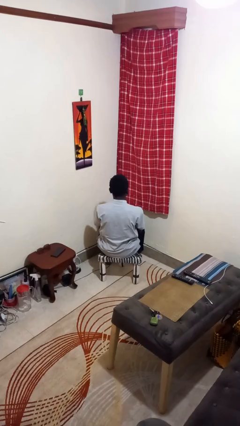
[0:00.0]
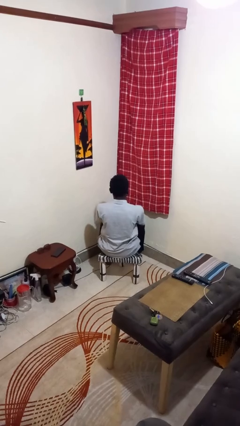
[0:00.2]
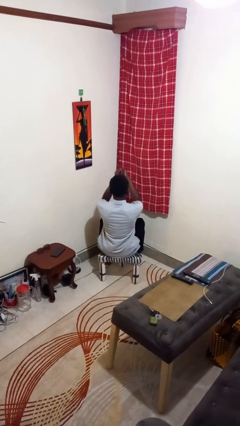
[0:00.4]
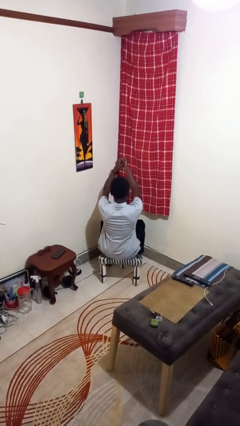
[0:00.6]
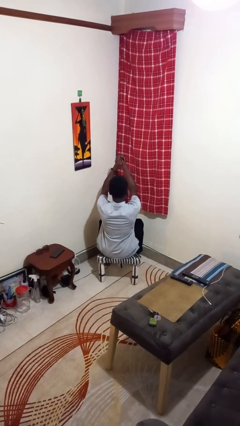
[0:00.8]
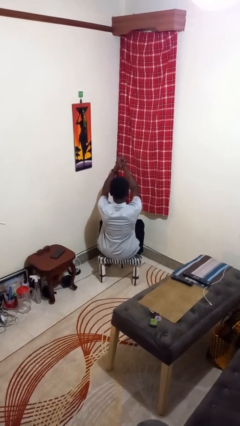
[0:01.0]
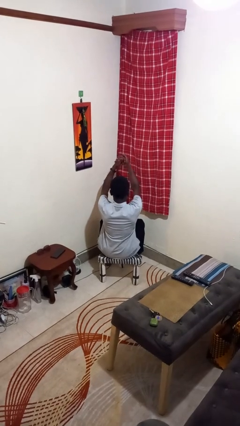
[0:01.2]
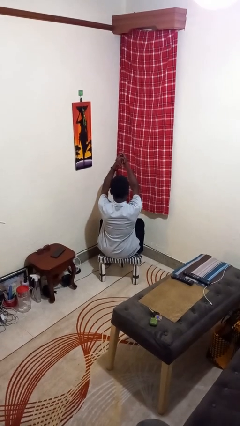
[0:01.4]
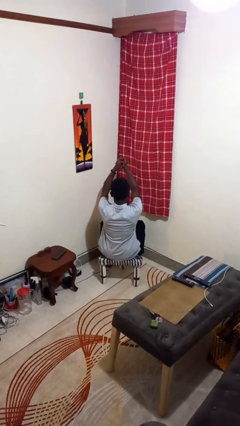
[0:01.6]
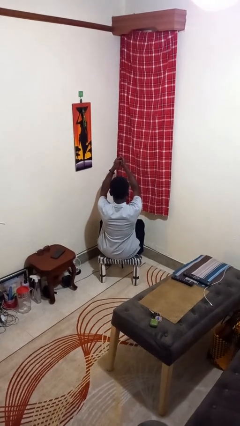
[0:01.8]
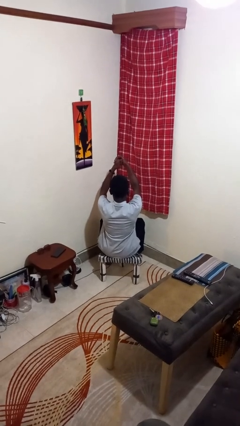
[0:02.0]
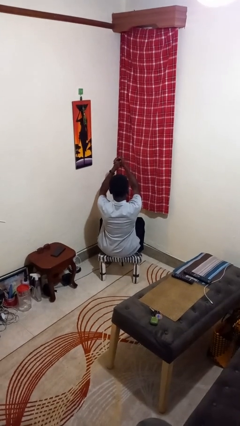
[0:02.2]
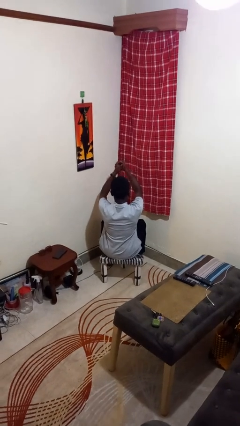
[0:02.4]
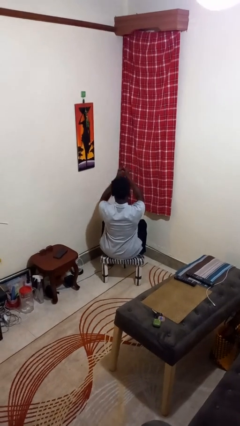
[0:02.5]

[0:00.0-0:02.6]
person cracks knuckles

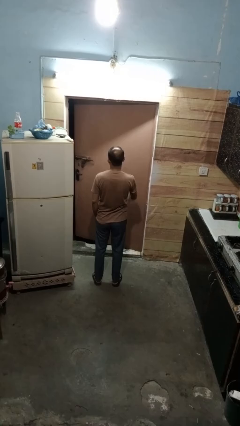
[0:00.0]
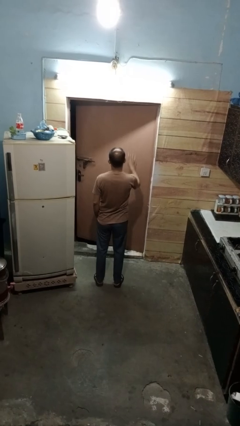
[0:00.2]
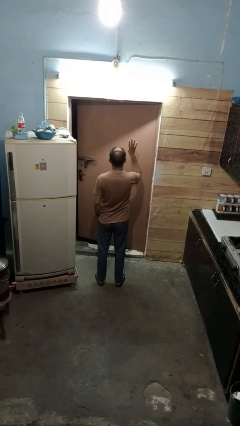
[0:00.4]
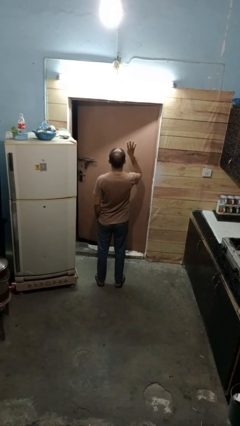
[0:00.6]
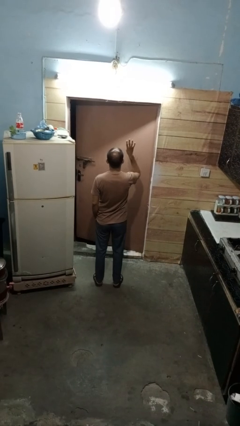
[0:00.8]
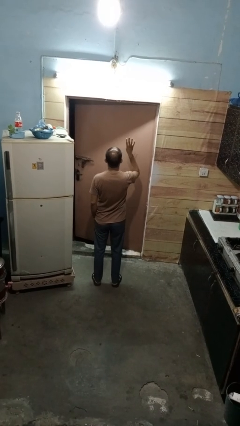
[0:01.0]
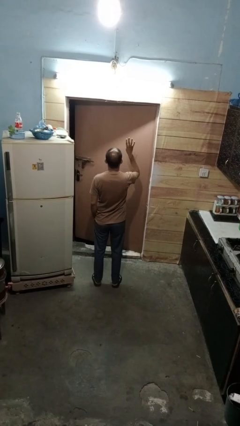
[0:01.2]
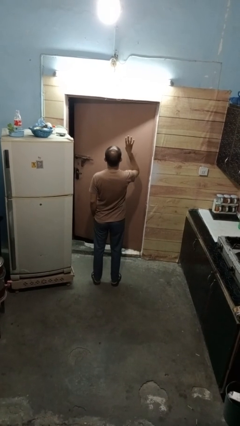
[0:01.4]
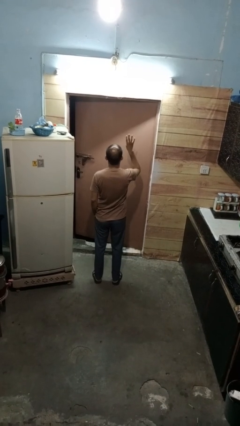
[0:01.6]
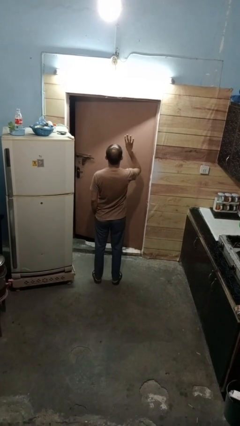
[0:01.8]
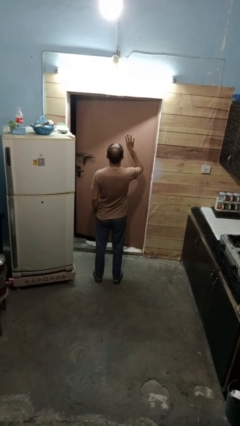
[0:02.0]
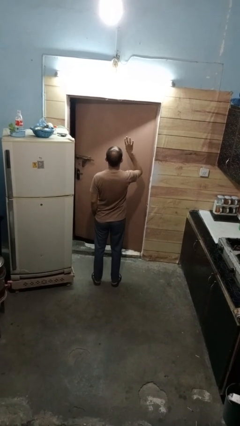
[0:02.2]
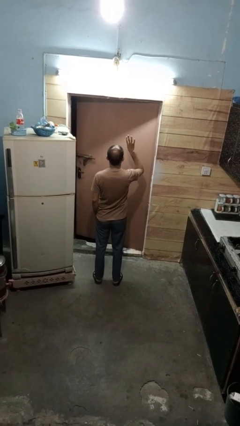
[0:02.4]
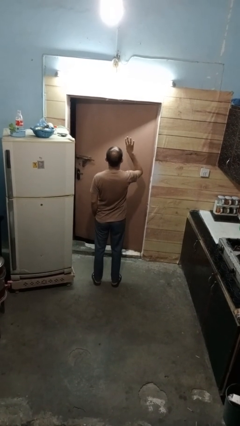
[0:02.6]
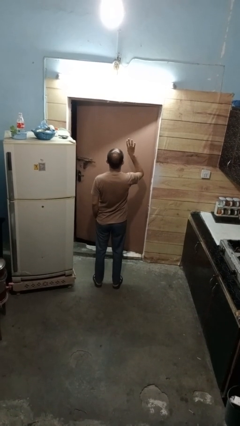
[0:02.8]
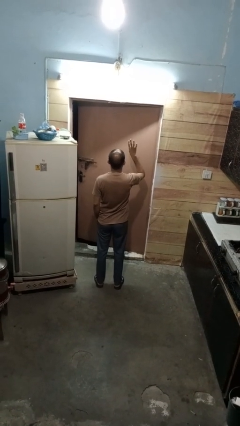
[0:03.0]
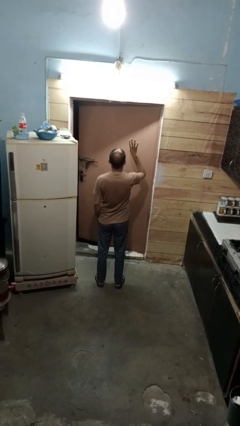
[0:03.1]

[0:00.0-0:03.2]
person gestures number four

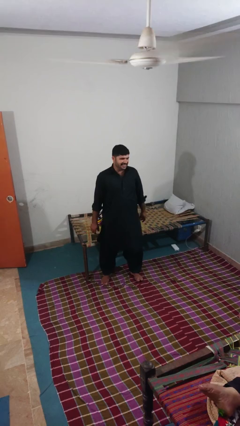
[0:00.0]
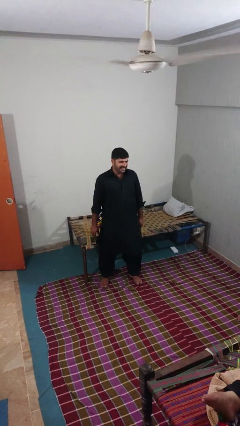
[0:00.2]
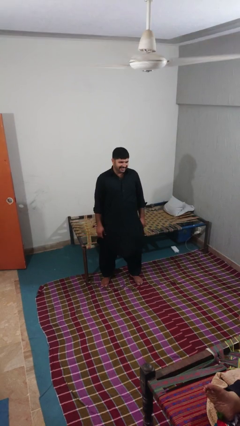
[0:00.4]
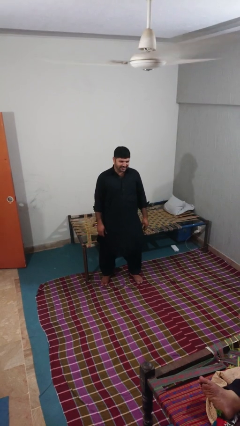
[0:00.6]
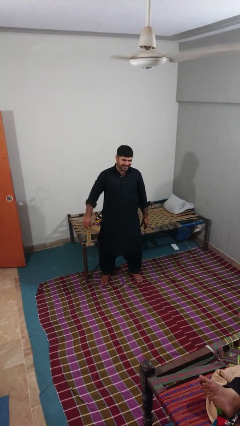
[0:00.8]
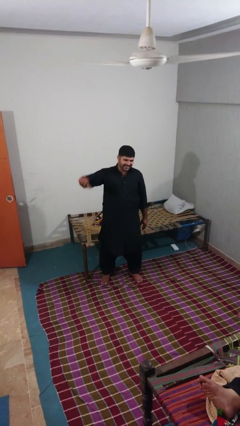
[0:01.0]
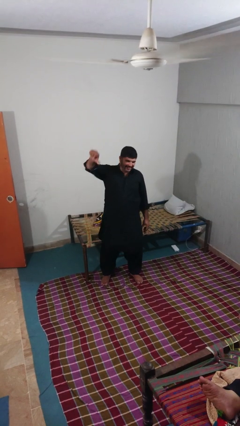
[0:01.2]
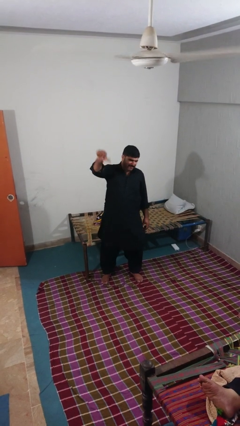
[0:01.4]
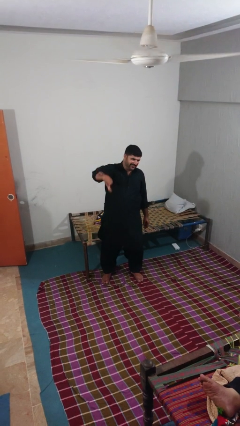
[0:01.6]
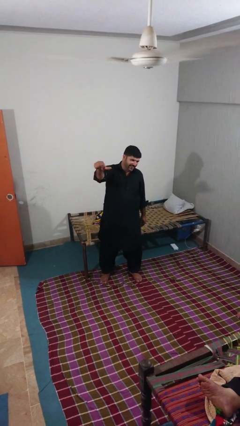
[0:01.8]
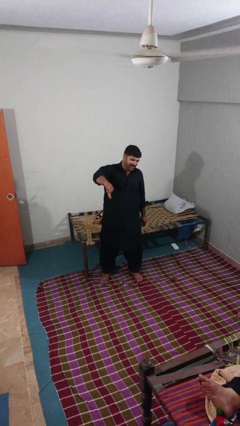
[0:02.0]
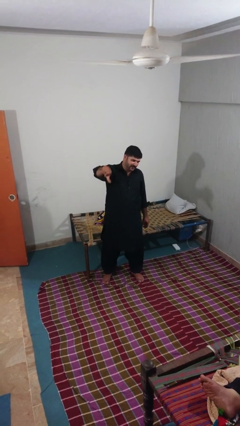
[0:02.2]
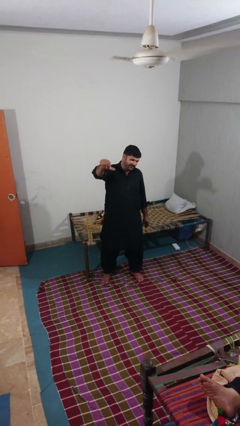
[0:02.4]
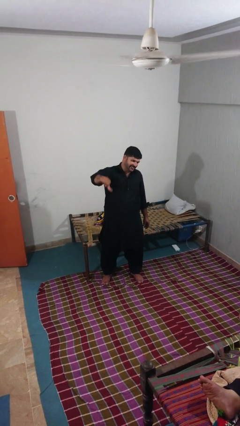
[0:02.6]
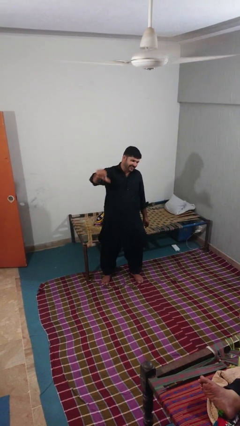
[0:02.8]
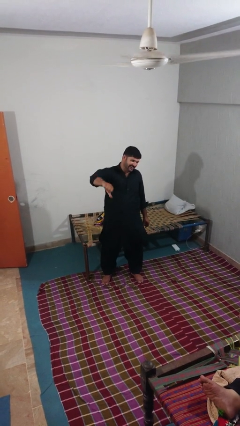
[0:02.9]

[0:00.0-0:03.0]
person gestures thumbs down

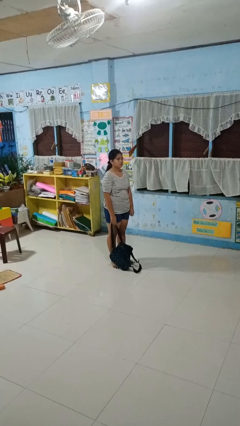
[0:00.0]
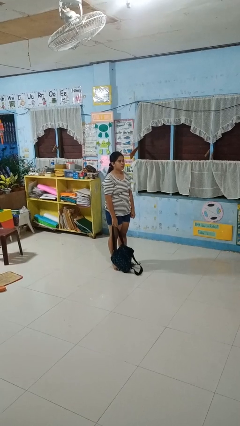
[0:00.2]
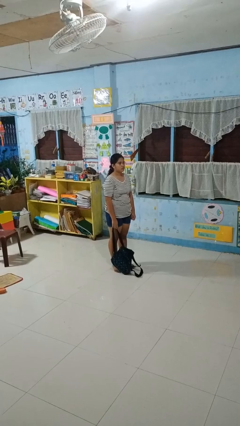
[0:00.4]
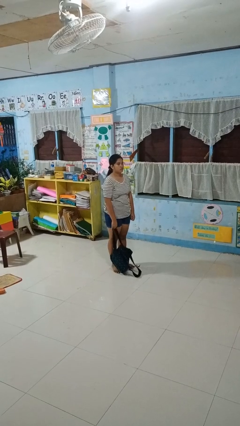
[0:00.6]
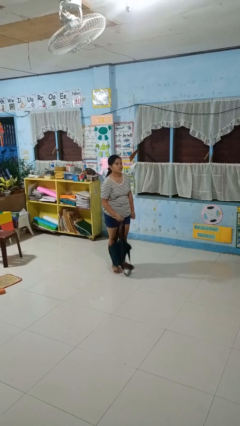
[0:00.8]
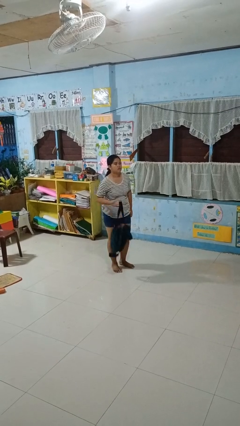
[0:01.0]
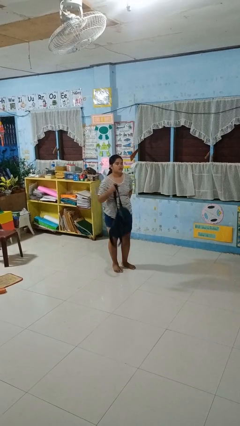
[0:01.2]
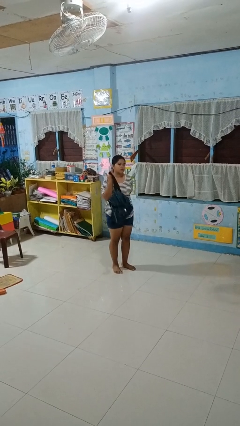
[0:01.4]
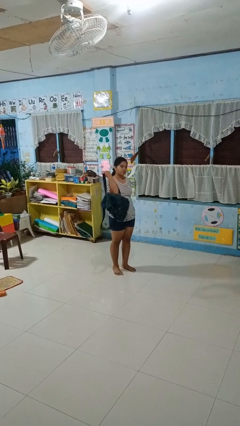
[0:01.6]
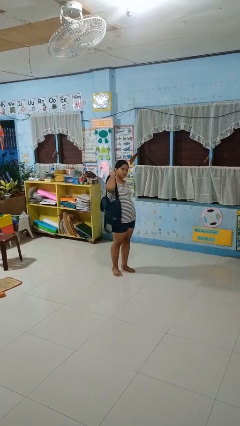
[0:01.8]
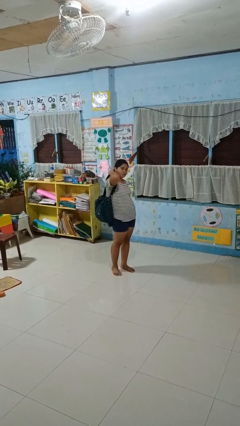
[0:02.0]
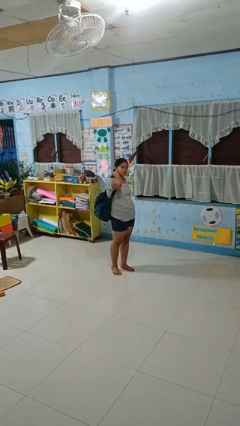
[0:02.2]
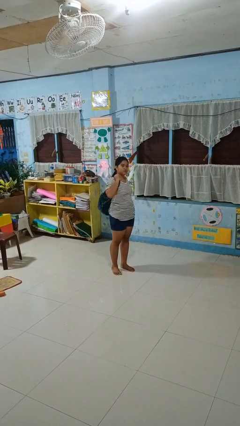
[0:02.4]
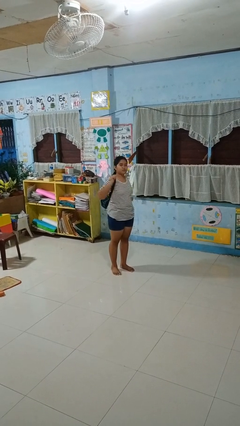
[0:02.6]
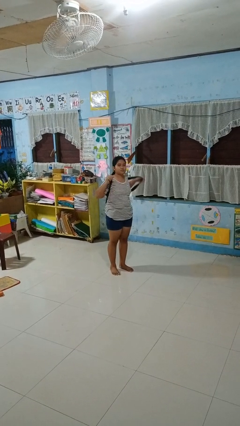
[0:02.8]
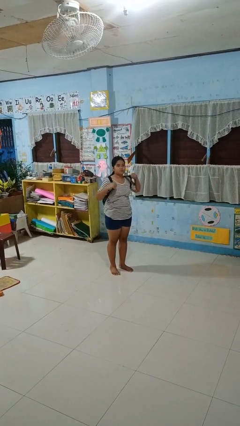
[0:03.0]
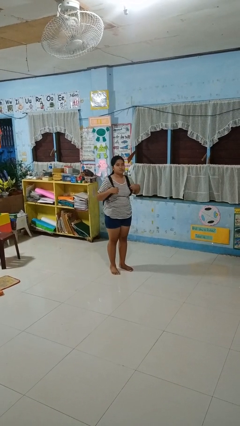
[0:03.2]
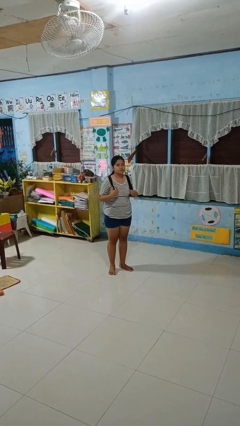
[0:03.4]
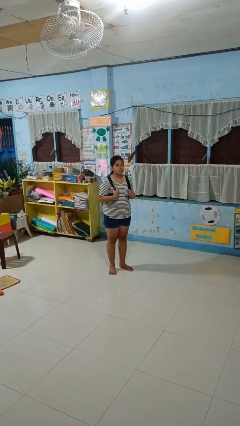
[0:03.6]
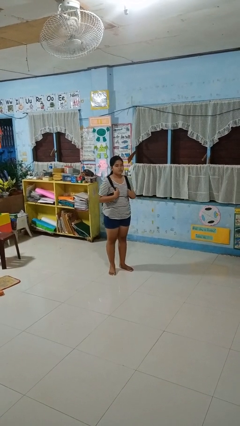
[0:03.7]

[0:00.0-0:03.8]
person puts on backpack

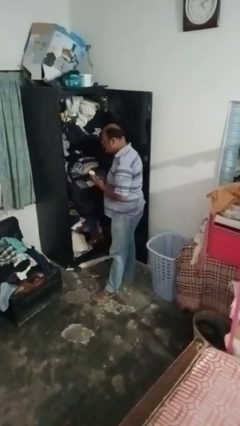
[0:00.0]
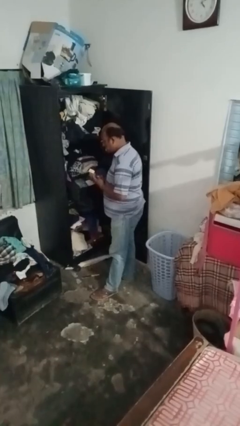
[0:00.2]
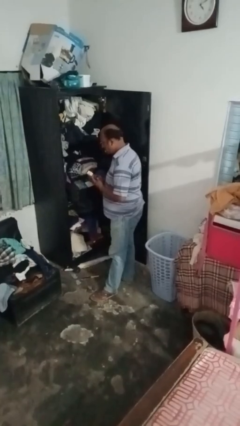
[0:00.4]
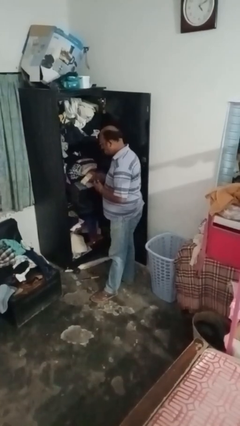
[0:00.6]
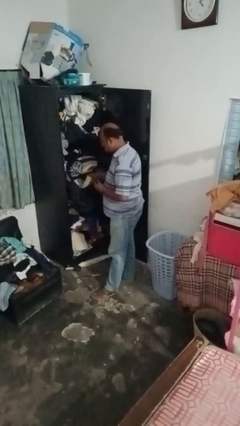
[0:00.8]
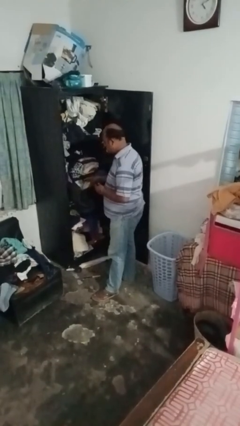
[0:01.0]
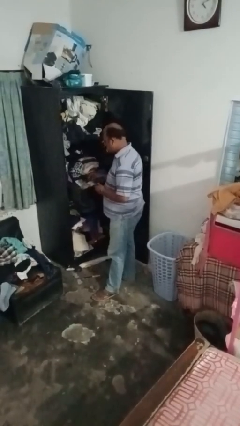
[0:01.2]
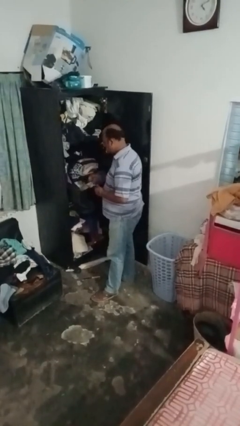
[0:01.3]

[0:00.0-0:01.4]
person takes clothes from dresser

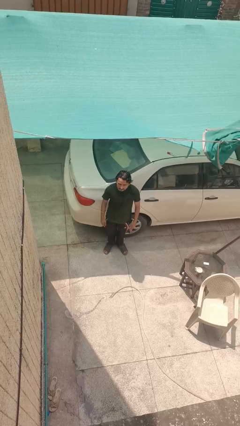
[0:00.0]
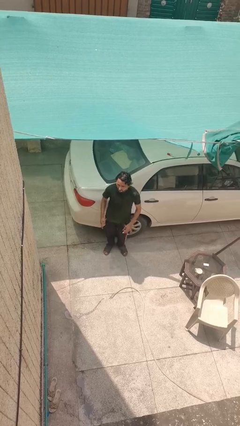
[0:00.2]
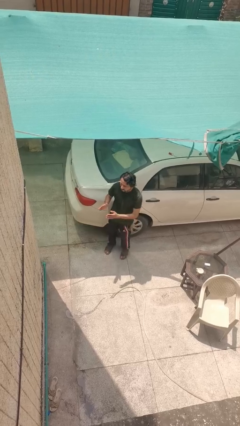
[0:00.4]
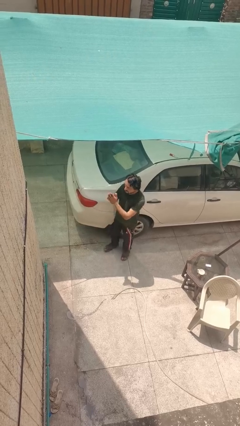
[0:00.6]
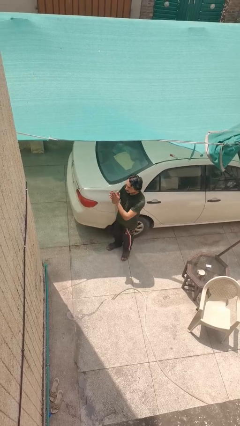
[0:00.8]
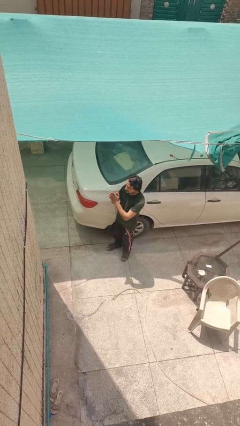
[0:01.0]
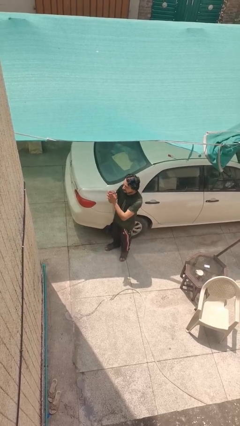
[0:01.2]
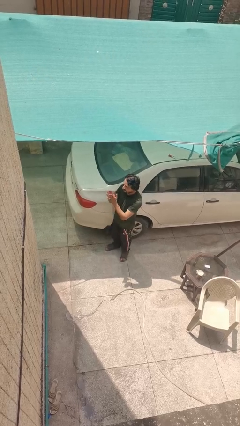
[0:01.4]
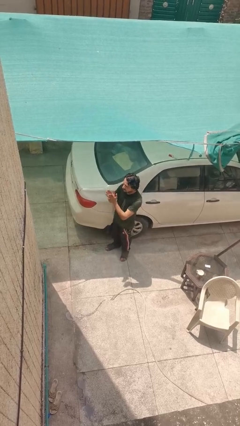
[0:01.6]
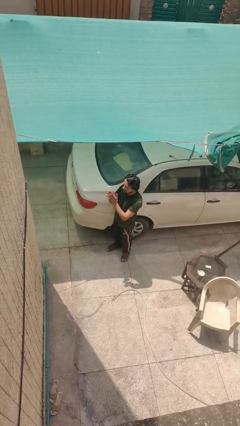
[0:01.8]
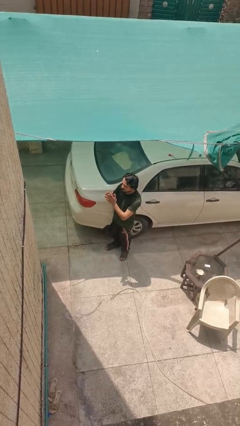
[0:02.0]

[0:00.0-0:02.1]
person claps hands

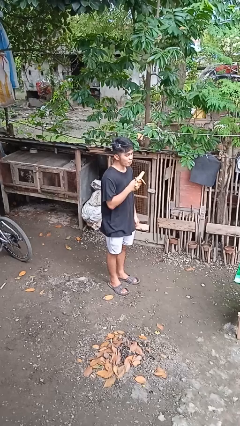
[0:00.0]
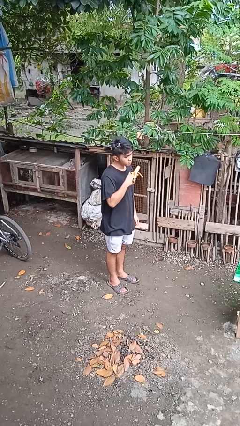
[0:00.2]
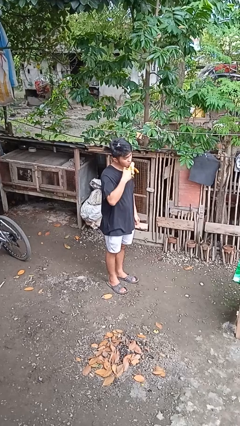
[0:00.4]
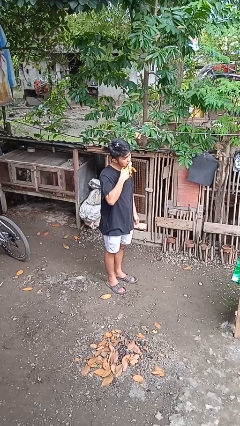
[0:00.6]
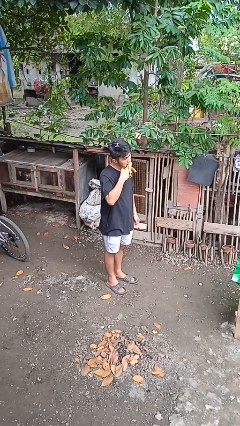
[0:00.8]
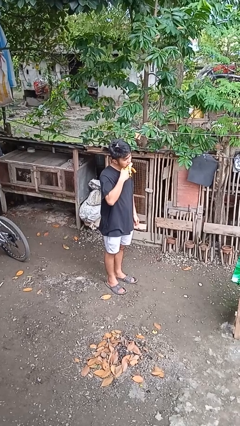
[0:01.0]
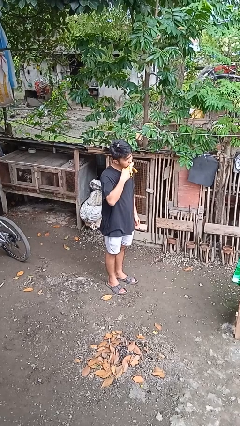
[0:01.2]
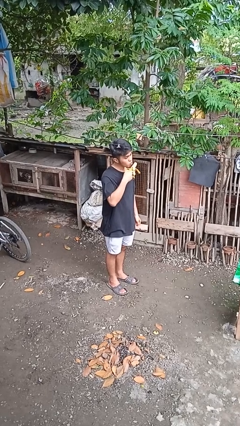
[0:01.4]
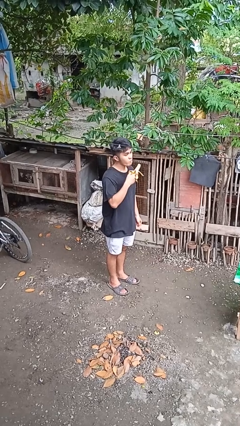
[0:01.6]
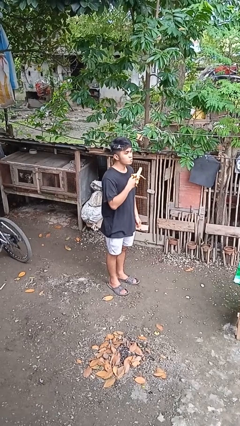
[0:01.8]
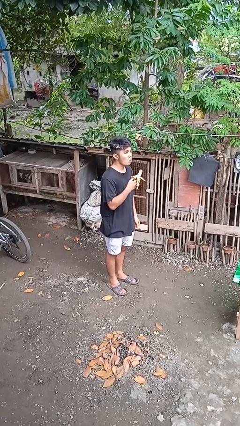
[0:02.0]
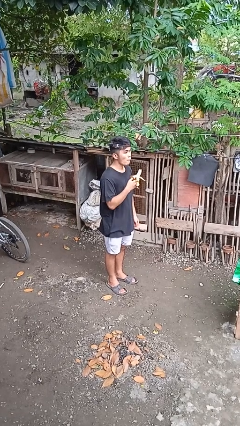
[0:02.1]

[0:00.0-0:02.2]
person eats banana
